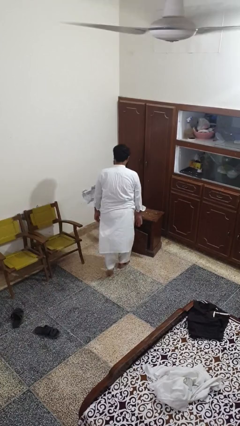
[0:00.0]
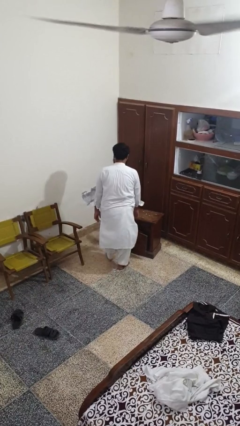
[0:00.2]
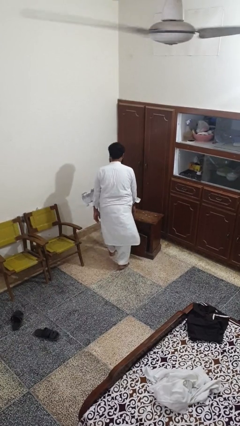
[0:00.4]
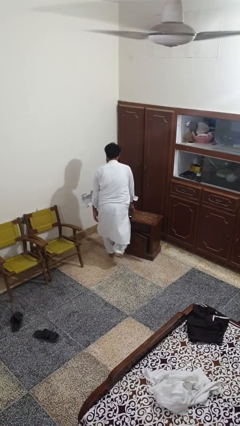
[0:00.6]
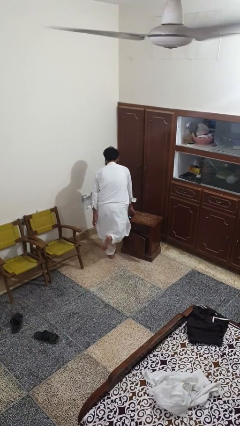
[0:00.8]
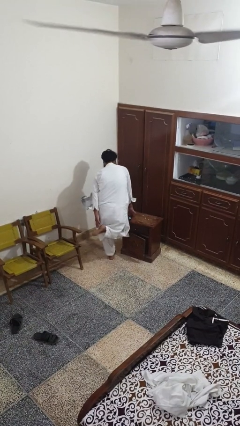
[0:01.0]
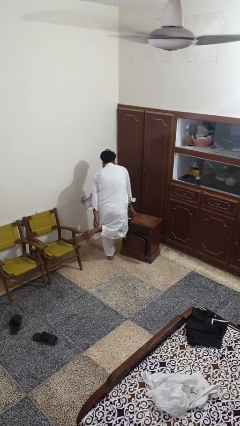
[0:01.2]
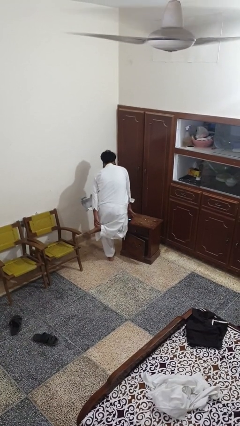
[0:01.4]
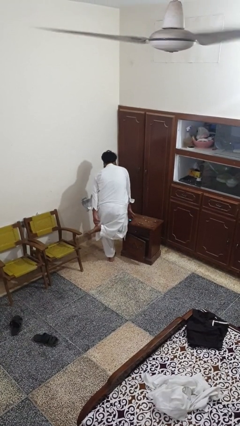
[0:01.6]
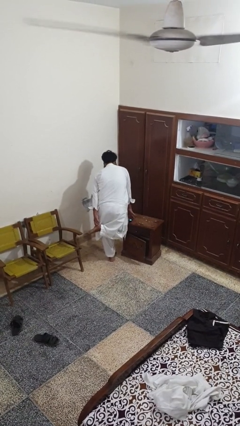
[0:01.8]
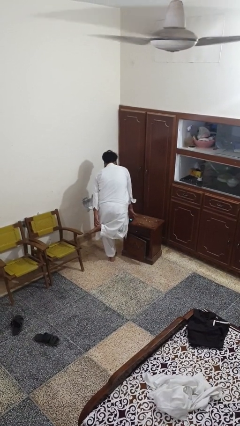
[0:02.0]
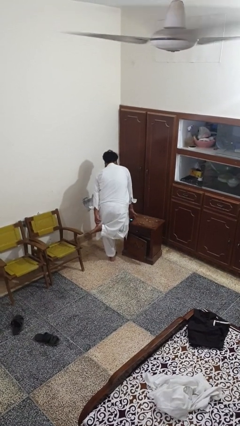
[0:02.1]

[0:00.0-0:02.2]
person stubs toe

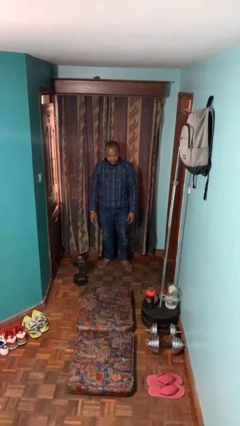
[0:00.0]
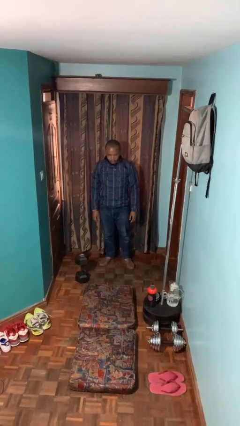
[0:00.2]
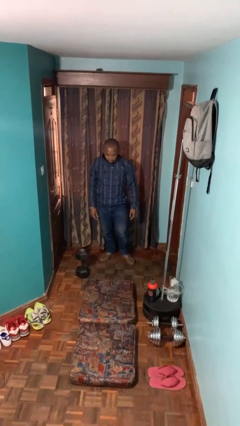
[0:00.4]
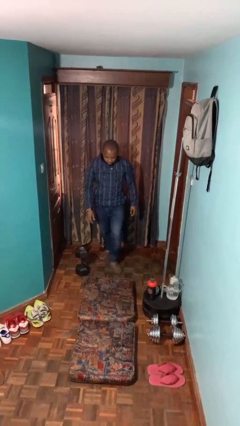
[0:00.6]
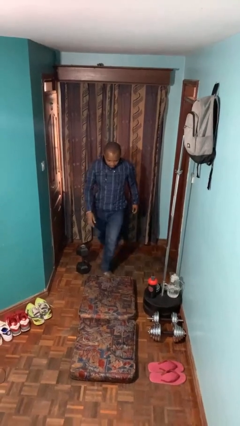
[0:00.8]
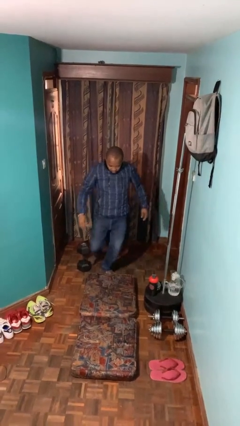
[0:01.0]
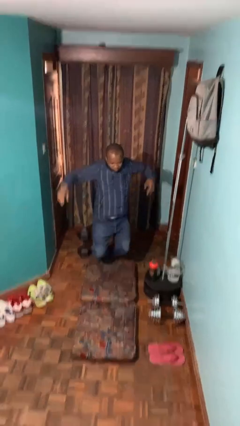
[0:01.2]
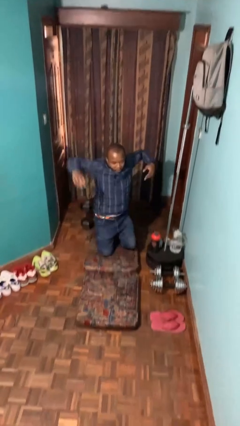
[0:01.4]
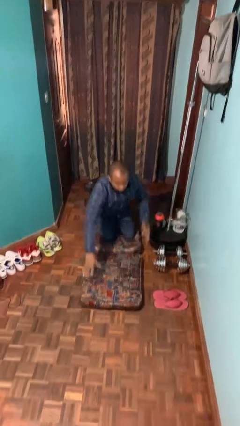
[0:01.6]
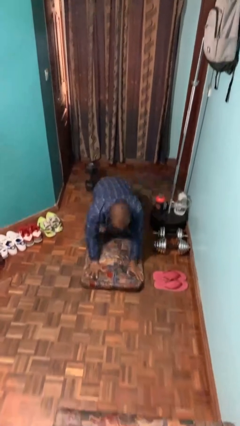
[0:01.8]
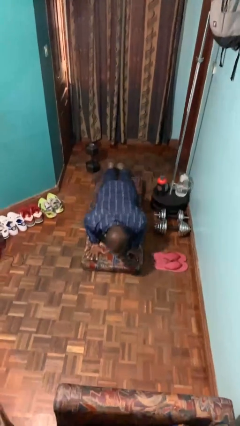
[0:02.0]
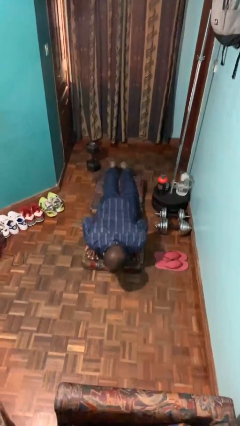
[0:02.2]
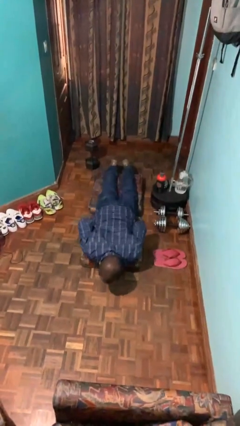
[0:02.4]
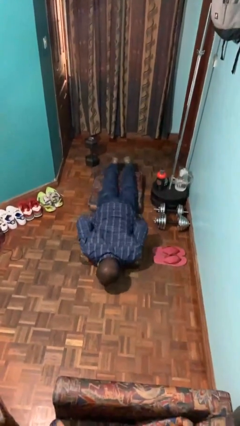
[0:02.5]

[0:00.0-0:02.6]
person trips on object on floor

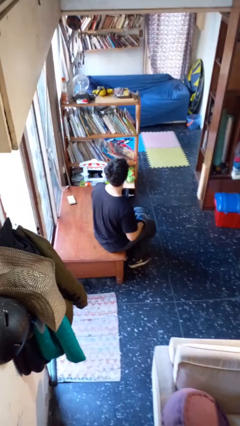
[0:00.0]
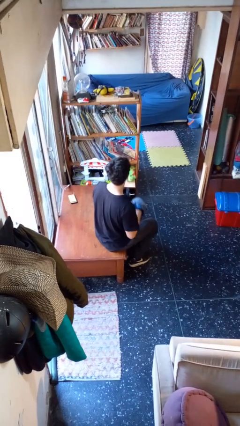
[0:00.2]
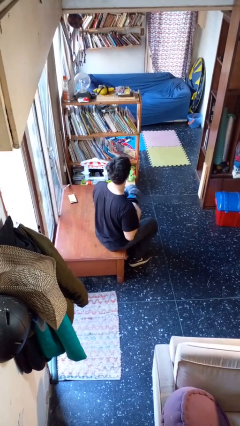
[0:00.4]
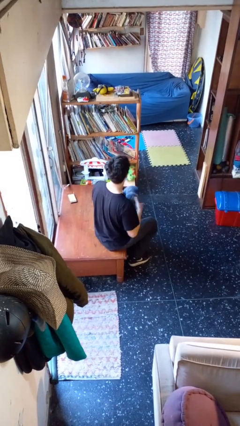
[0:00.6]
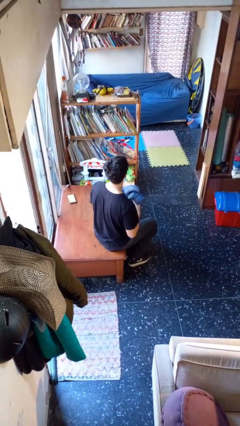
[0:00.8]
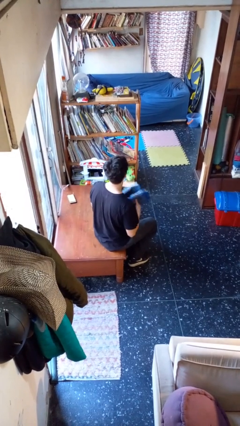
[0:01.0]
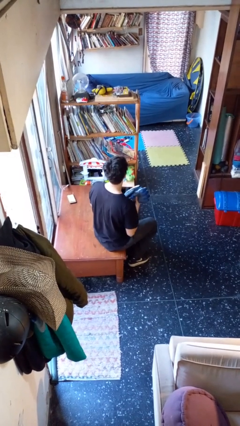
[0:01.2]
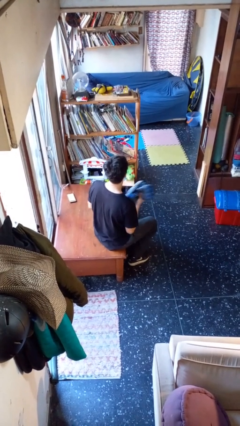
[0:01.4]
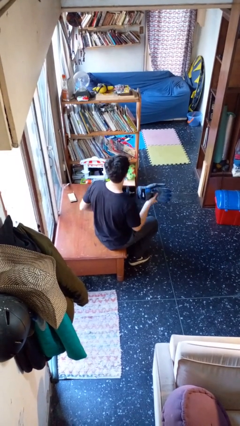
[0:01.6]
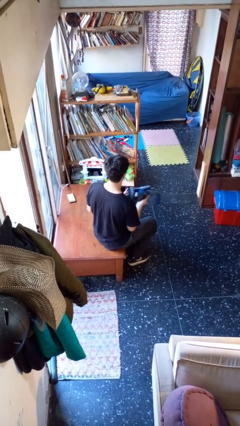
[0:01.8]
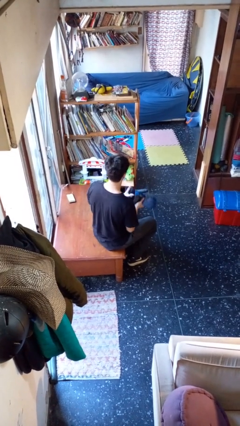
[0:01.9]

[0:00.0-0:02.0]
person takes off gloves

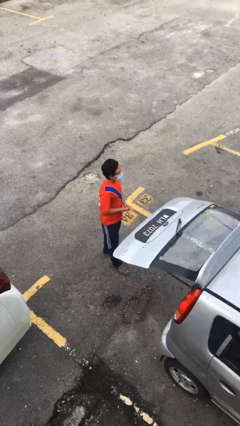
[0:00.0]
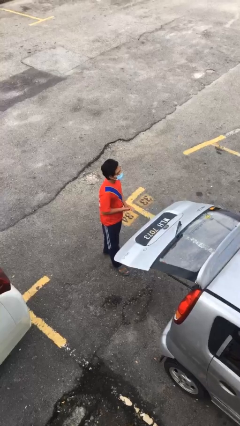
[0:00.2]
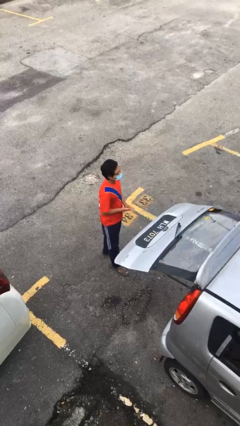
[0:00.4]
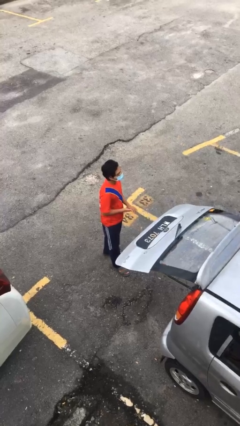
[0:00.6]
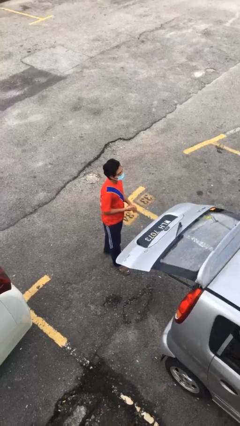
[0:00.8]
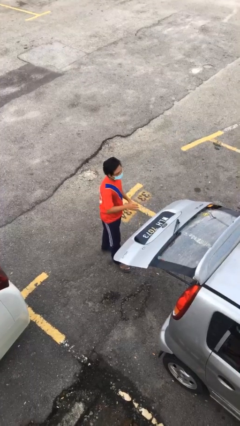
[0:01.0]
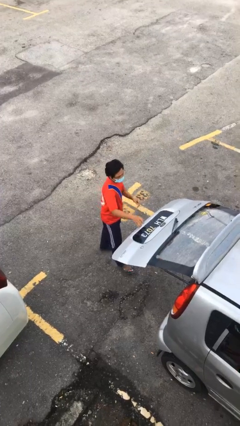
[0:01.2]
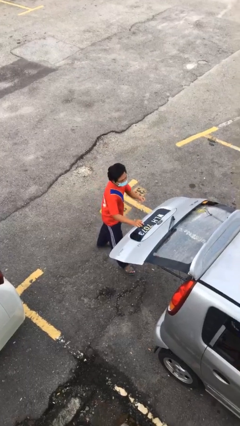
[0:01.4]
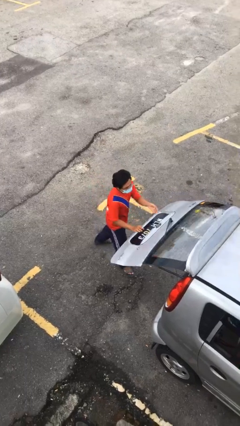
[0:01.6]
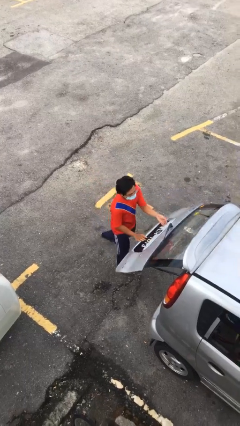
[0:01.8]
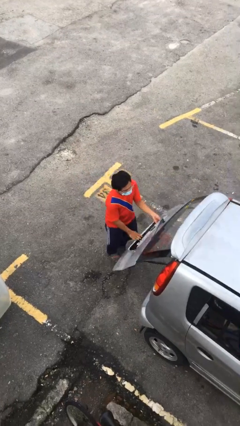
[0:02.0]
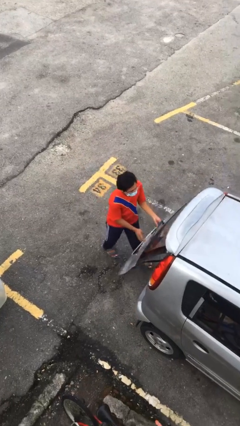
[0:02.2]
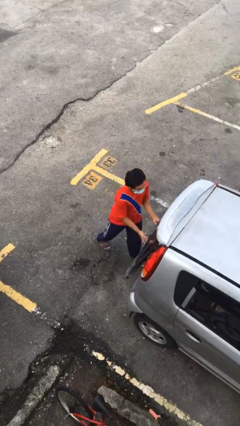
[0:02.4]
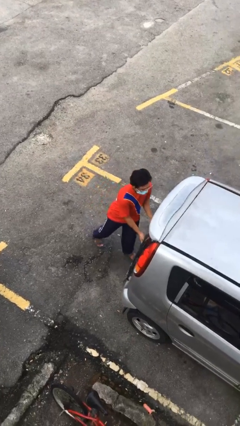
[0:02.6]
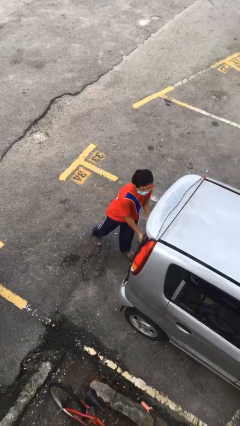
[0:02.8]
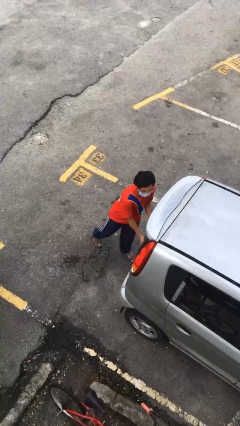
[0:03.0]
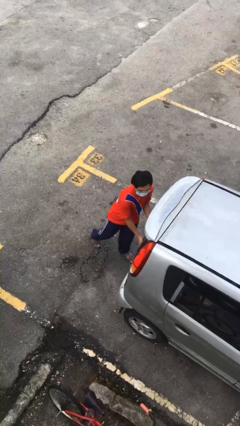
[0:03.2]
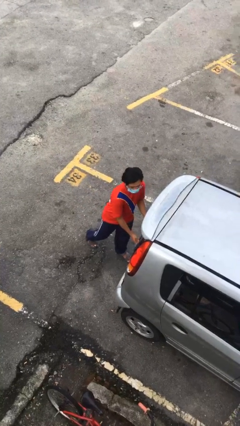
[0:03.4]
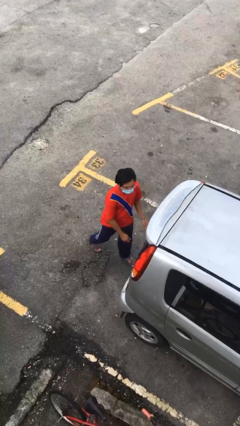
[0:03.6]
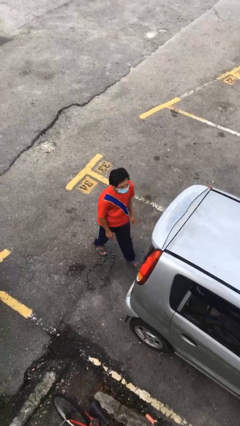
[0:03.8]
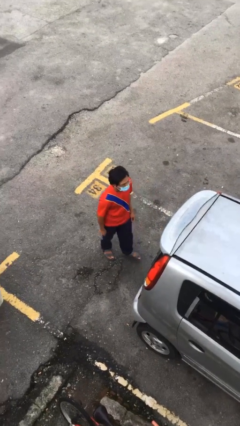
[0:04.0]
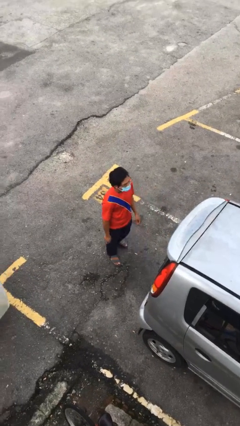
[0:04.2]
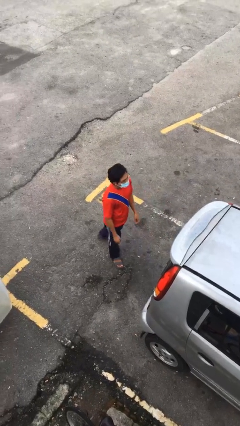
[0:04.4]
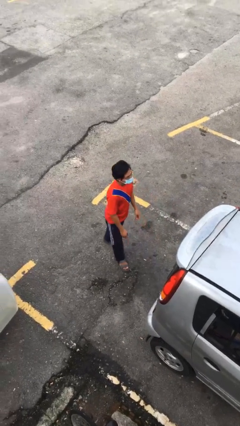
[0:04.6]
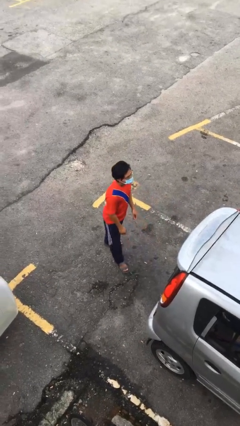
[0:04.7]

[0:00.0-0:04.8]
person closes car trunk

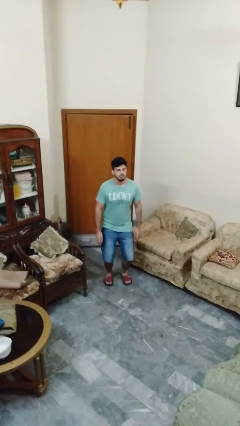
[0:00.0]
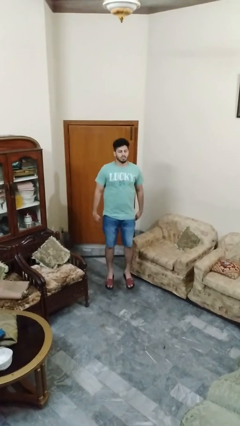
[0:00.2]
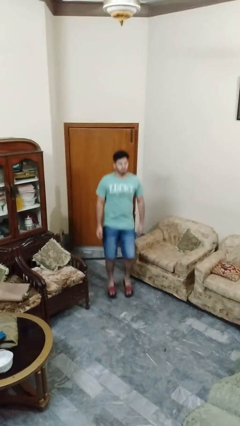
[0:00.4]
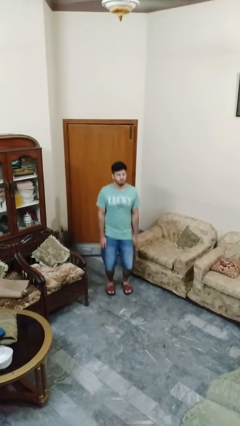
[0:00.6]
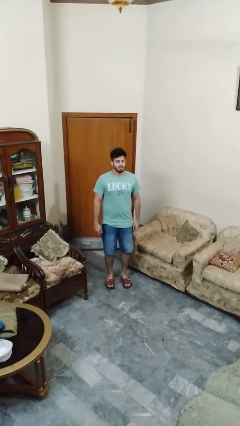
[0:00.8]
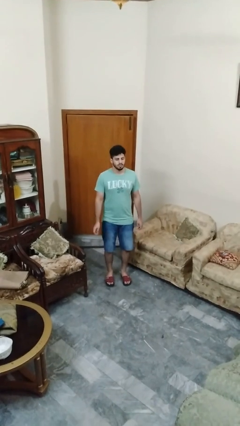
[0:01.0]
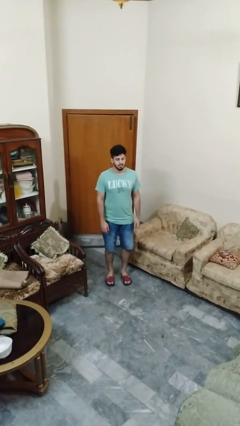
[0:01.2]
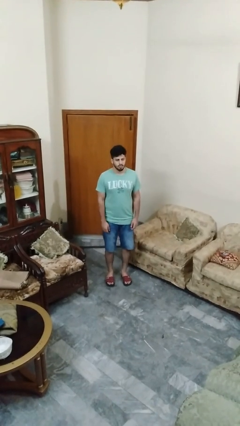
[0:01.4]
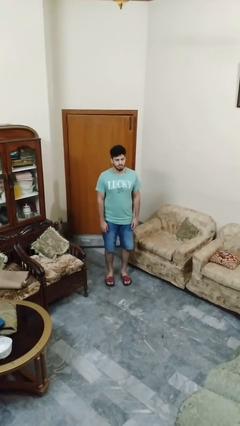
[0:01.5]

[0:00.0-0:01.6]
person jumps

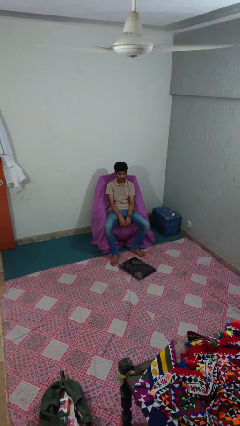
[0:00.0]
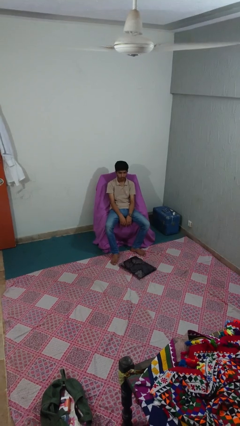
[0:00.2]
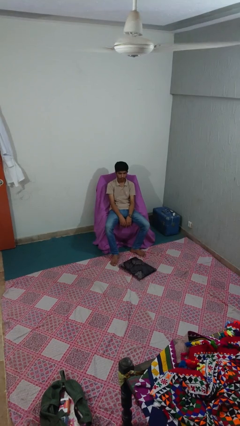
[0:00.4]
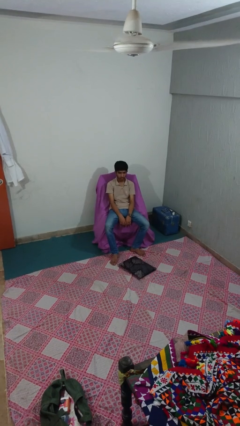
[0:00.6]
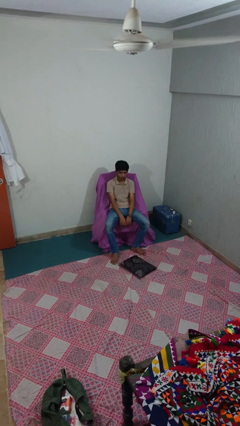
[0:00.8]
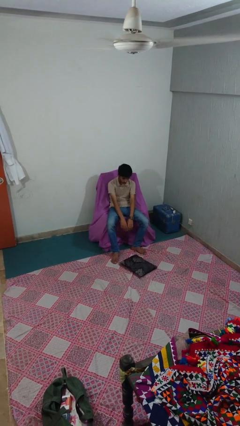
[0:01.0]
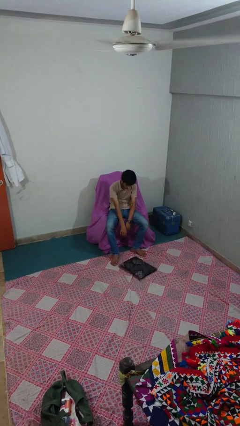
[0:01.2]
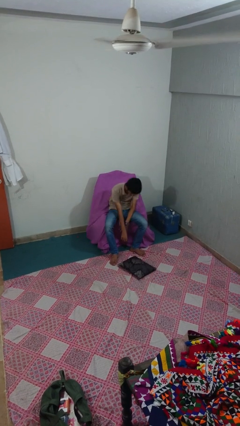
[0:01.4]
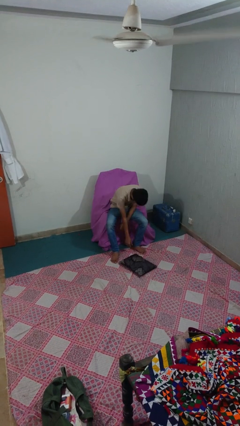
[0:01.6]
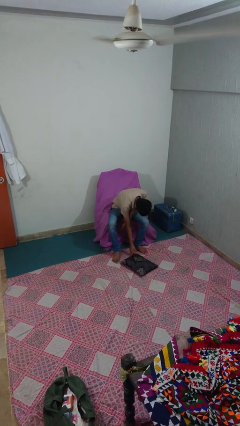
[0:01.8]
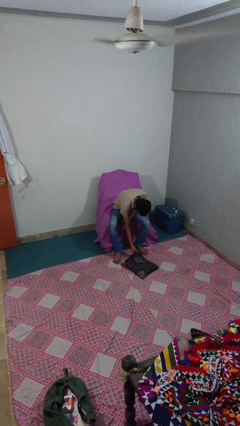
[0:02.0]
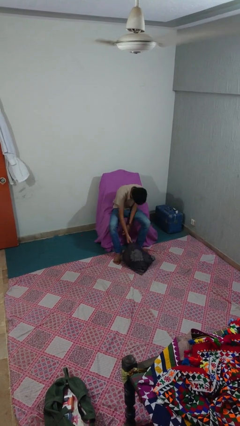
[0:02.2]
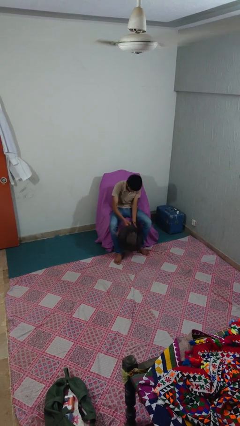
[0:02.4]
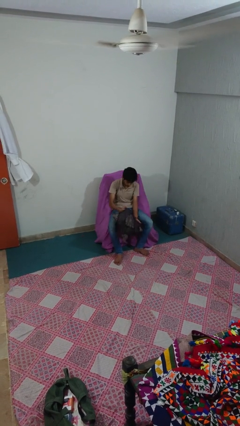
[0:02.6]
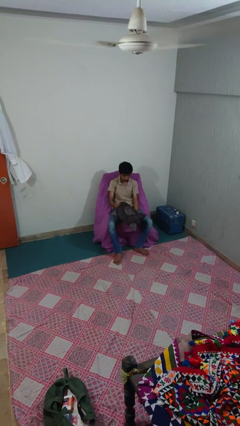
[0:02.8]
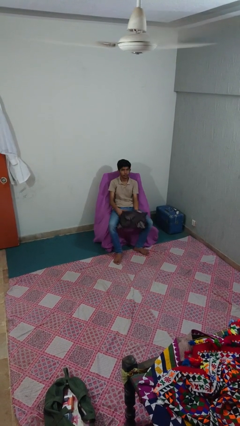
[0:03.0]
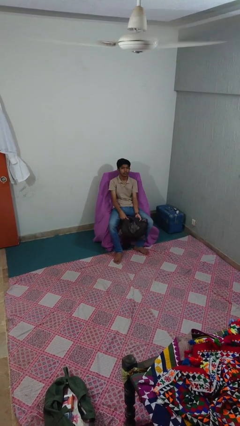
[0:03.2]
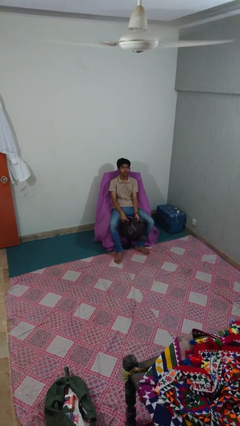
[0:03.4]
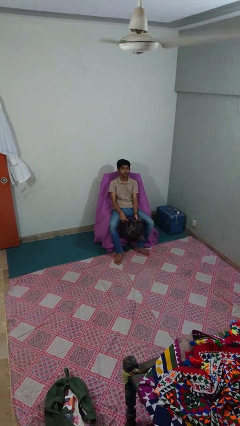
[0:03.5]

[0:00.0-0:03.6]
person picks up object from floor

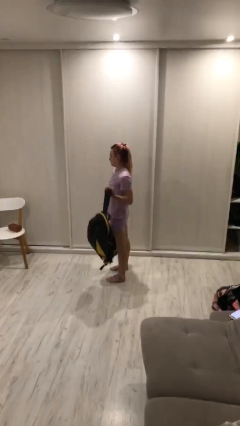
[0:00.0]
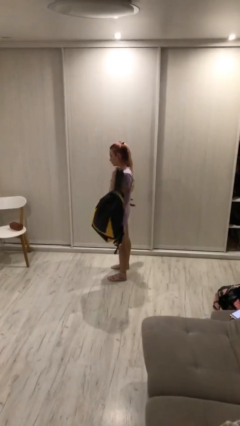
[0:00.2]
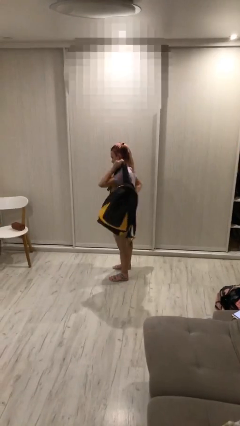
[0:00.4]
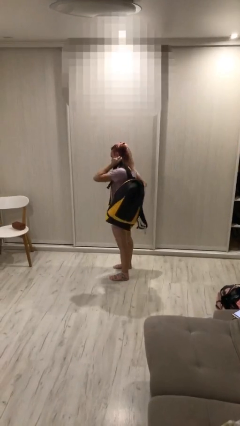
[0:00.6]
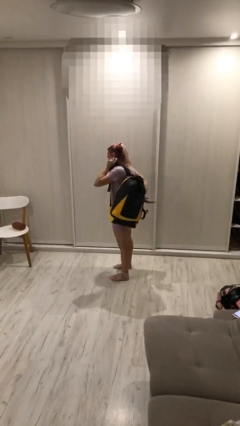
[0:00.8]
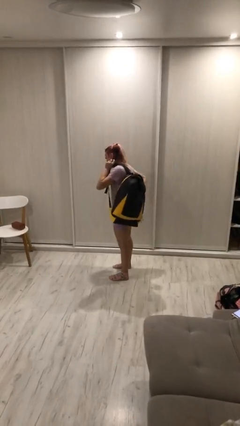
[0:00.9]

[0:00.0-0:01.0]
person puts on backpack
